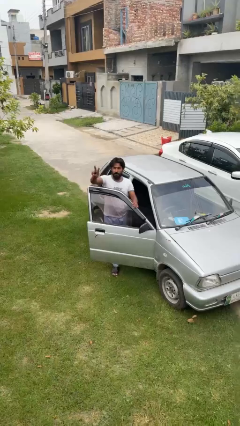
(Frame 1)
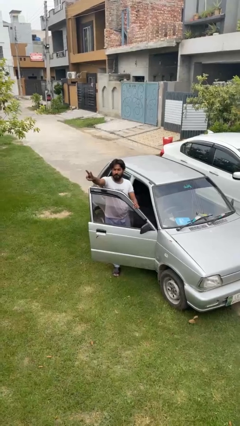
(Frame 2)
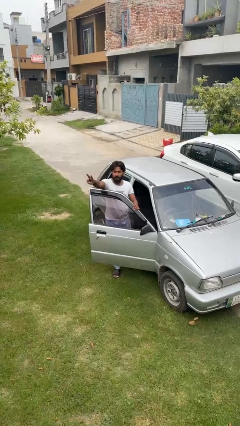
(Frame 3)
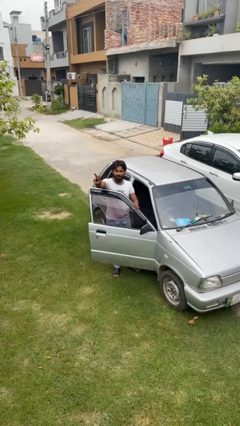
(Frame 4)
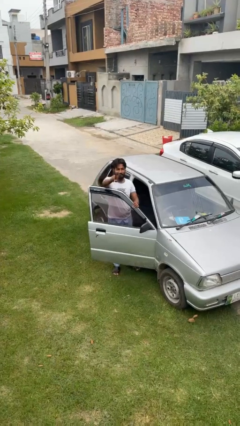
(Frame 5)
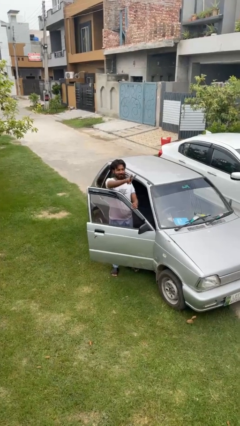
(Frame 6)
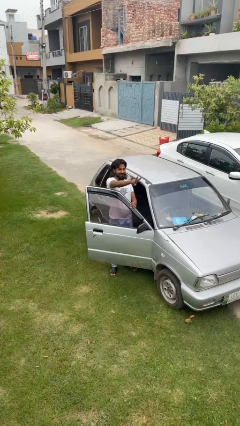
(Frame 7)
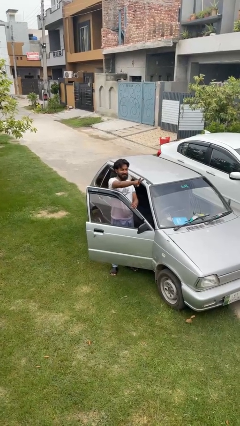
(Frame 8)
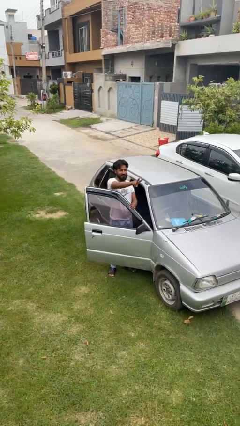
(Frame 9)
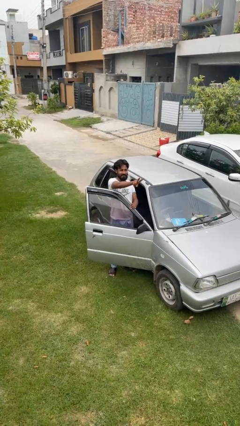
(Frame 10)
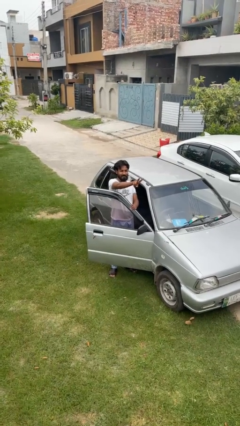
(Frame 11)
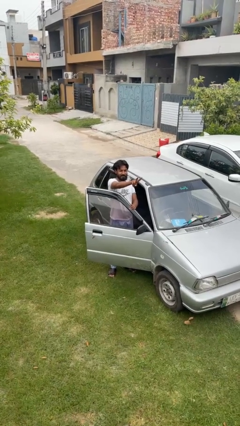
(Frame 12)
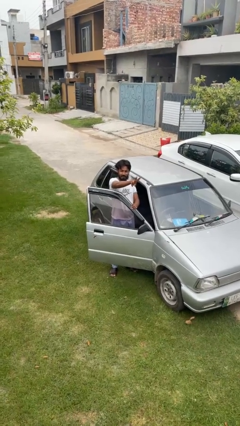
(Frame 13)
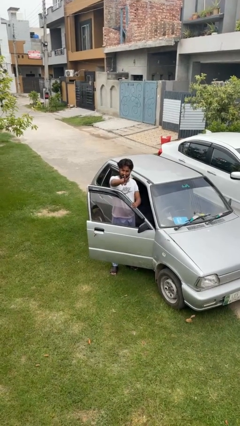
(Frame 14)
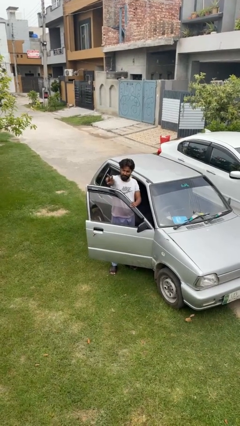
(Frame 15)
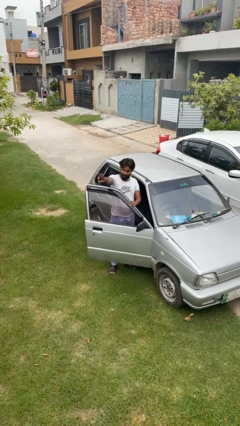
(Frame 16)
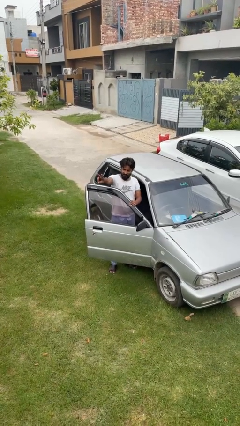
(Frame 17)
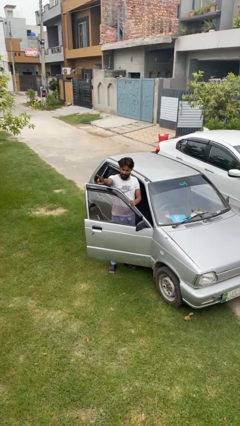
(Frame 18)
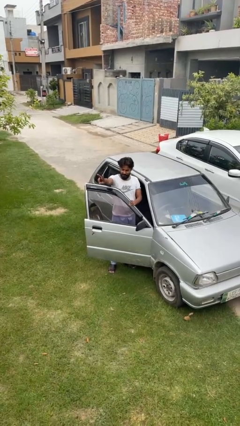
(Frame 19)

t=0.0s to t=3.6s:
person gestures peace

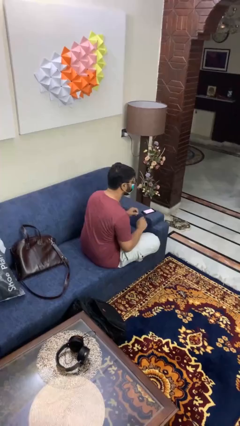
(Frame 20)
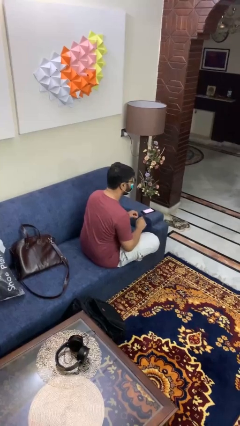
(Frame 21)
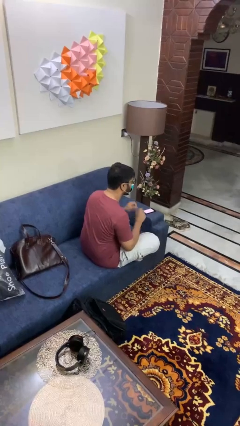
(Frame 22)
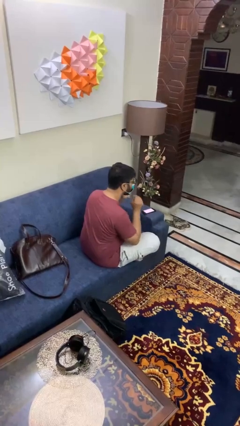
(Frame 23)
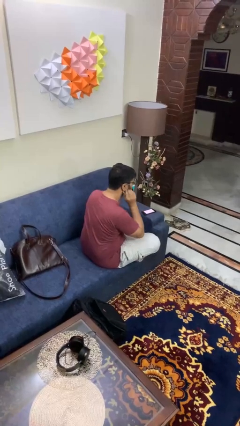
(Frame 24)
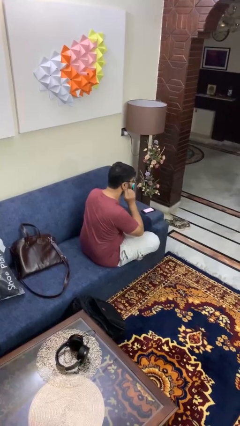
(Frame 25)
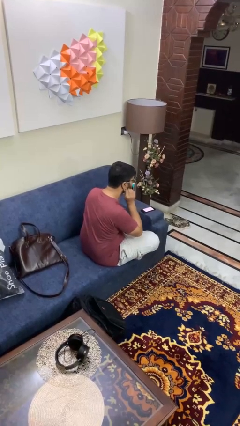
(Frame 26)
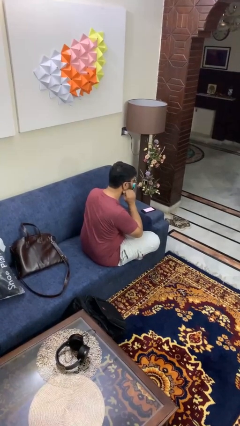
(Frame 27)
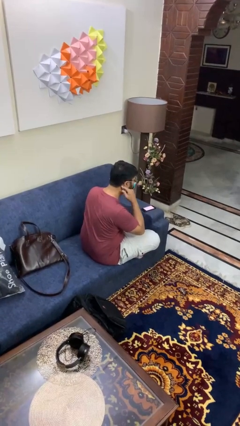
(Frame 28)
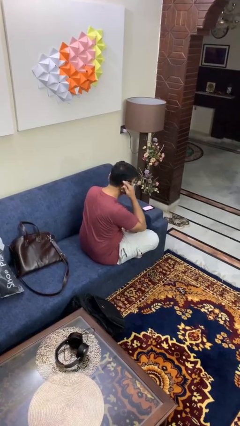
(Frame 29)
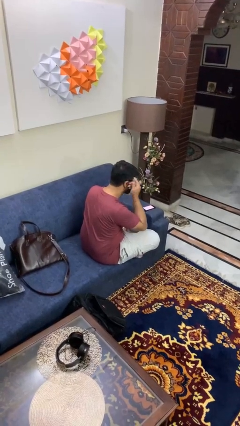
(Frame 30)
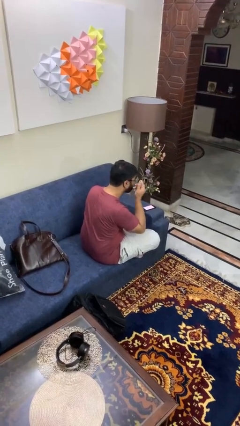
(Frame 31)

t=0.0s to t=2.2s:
person takes off facemask

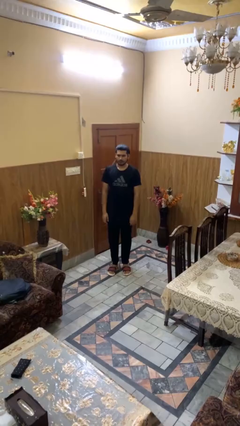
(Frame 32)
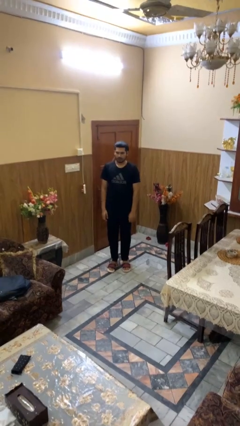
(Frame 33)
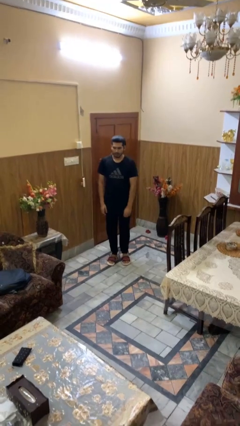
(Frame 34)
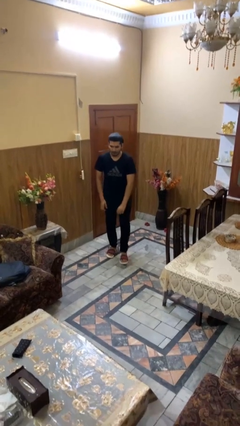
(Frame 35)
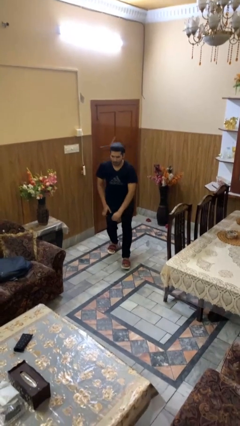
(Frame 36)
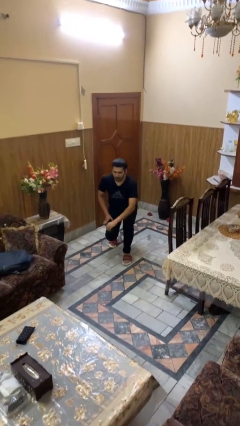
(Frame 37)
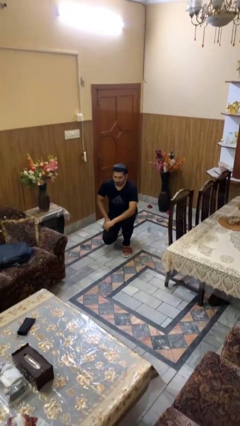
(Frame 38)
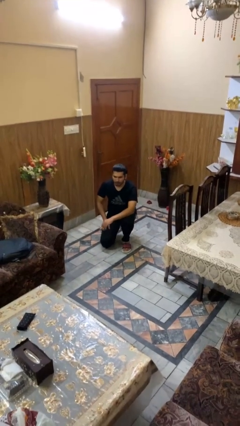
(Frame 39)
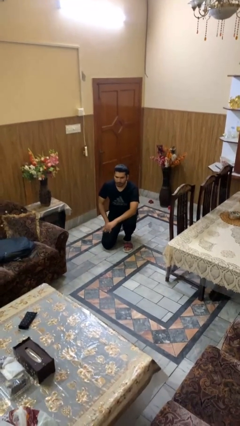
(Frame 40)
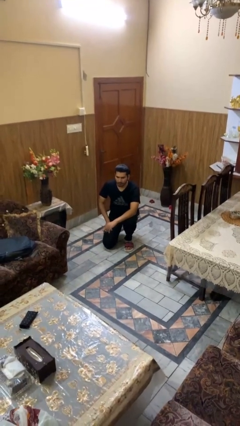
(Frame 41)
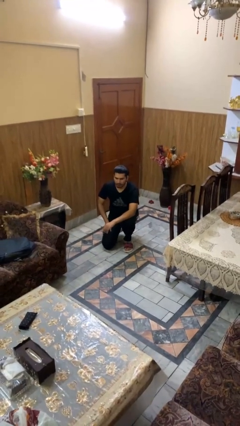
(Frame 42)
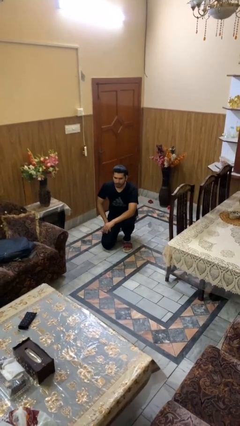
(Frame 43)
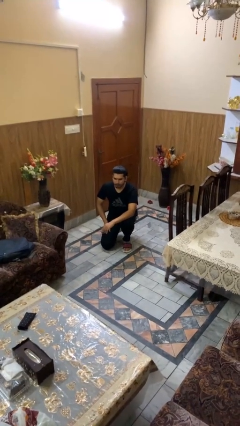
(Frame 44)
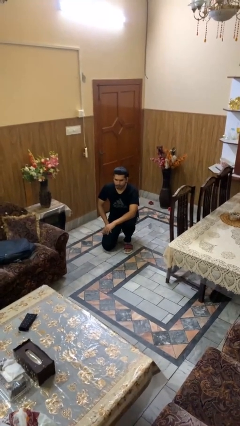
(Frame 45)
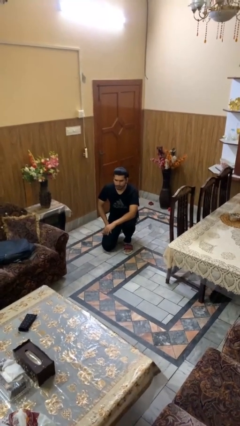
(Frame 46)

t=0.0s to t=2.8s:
person kneels

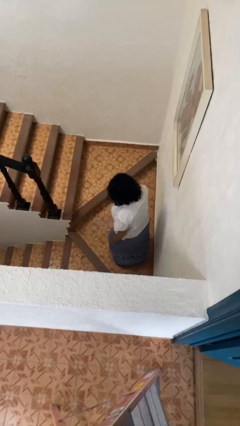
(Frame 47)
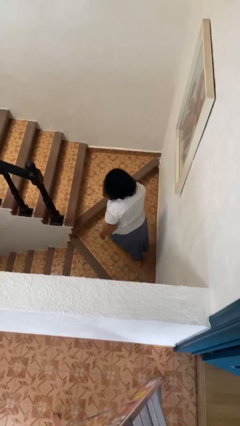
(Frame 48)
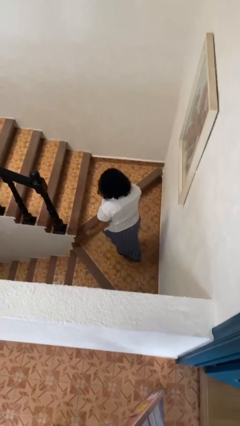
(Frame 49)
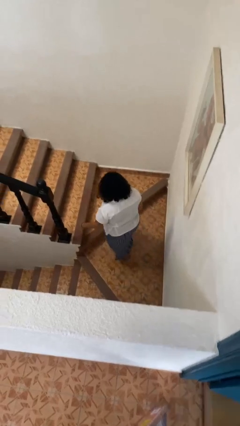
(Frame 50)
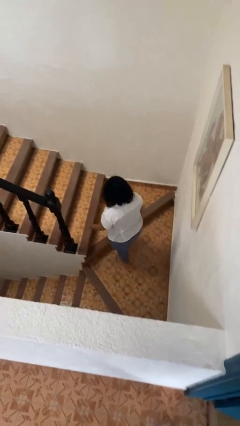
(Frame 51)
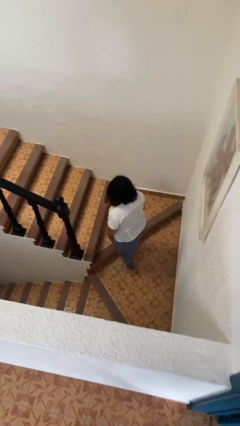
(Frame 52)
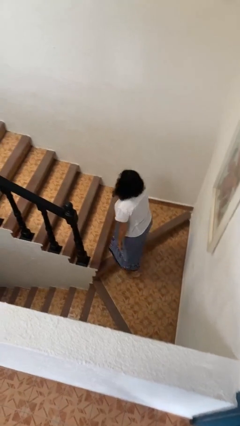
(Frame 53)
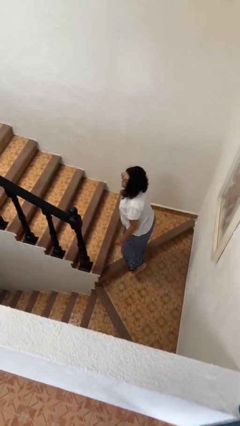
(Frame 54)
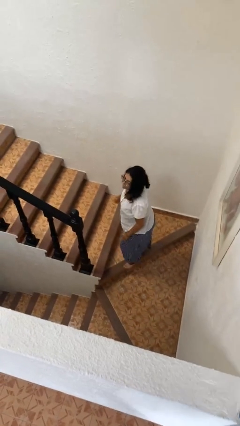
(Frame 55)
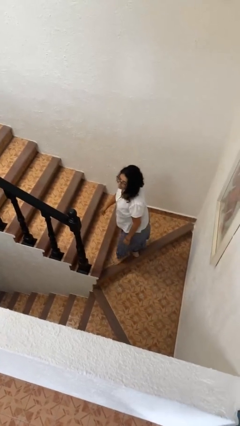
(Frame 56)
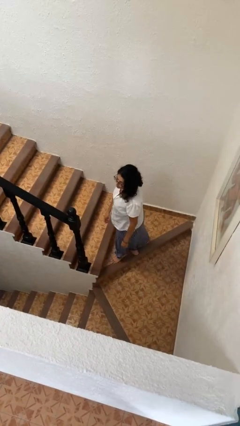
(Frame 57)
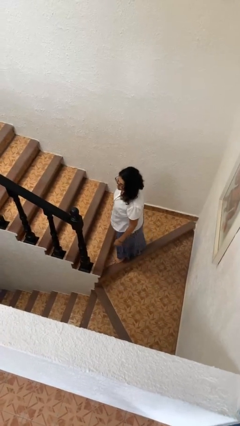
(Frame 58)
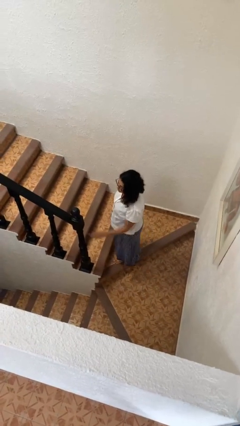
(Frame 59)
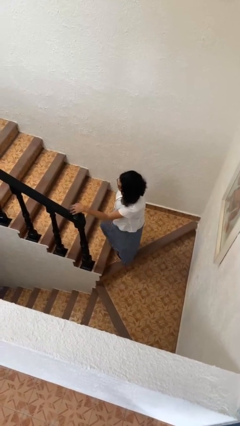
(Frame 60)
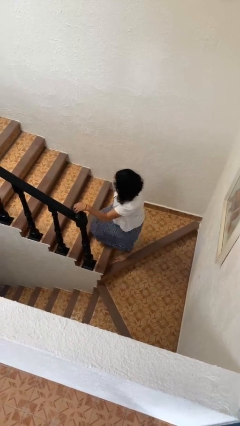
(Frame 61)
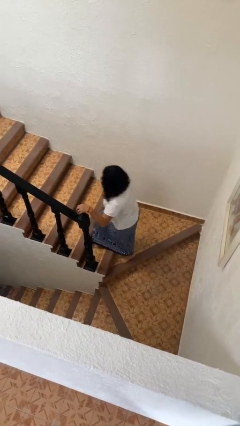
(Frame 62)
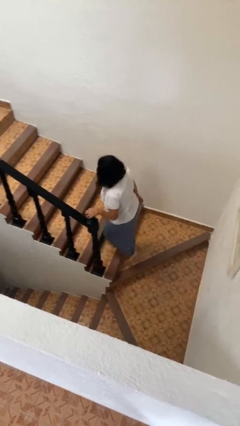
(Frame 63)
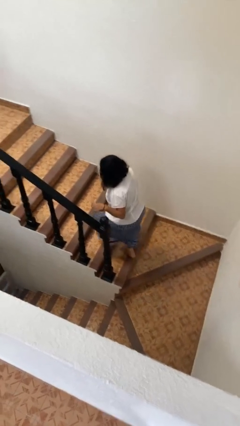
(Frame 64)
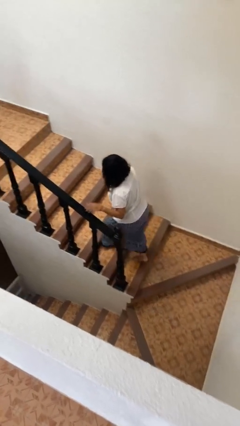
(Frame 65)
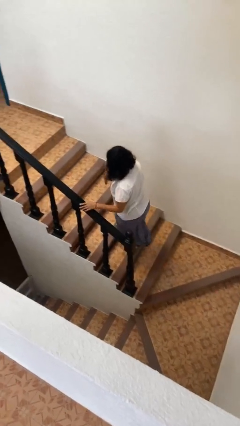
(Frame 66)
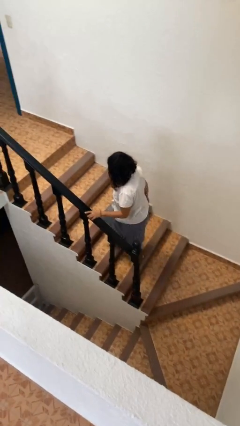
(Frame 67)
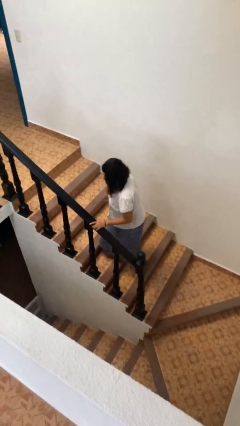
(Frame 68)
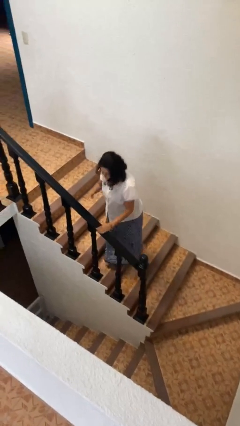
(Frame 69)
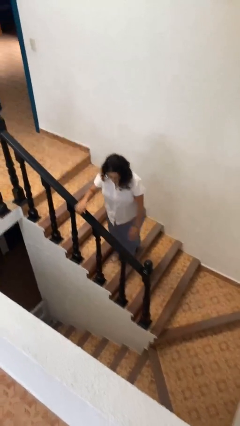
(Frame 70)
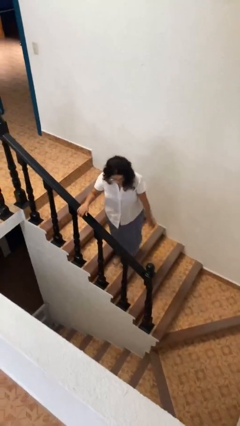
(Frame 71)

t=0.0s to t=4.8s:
person climbs up stairs

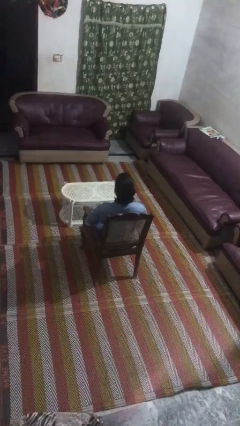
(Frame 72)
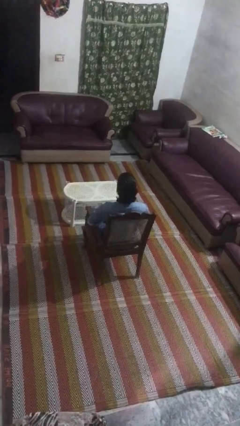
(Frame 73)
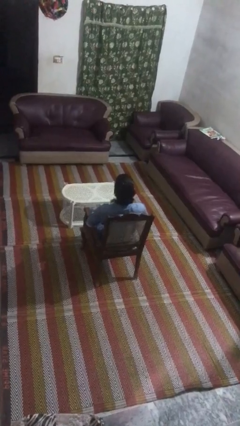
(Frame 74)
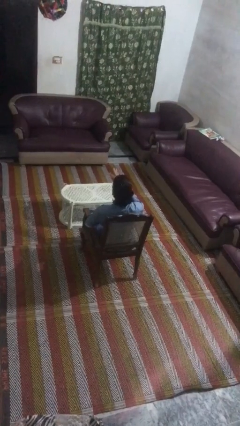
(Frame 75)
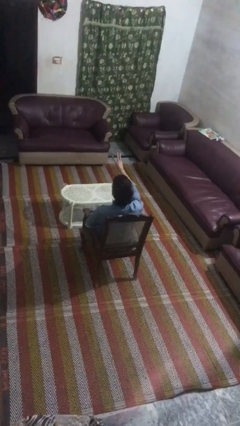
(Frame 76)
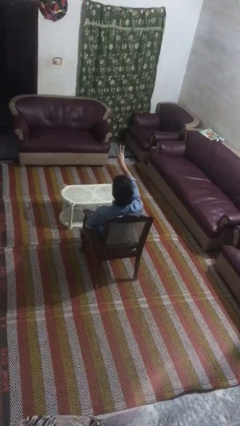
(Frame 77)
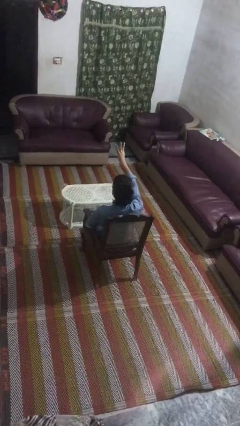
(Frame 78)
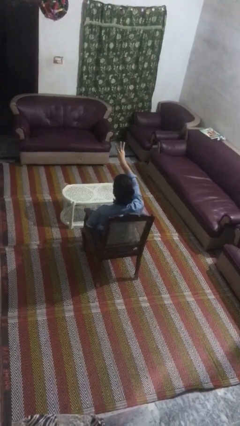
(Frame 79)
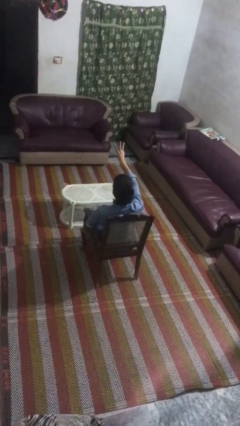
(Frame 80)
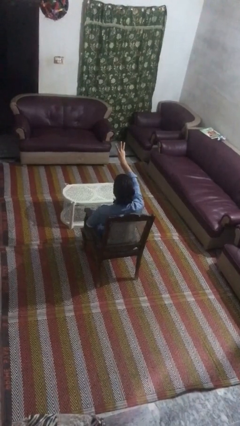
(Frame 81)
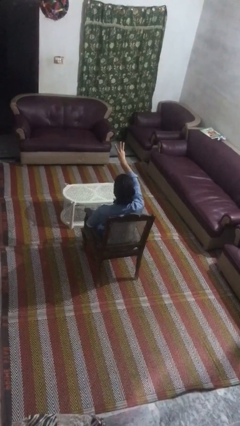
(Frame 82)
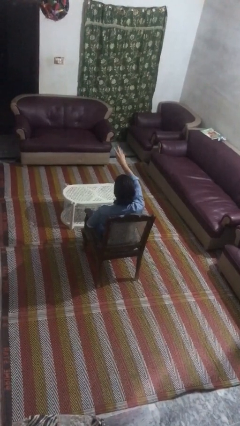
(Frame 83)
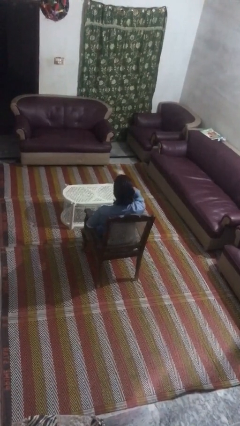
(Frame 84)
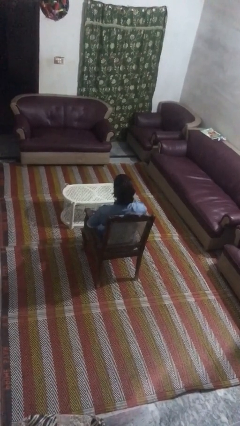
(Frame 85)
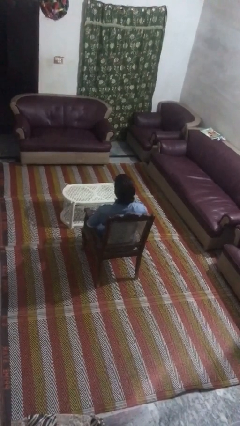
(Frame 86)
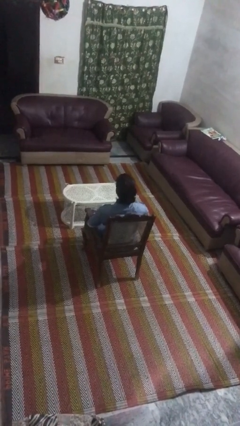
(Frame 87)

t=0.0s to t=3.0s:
person gestures number three

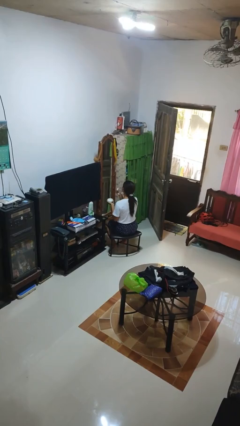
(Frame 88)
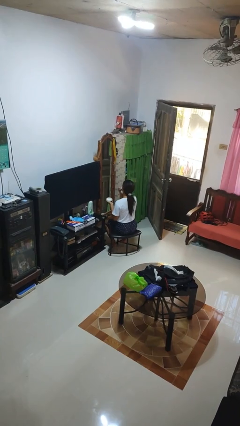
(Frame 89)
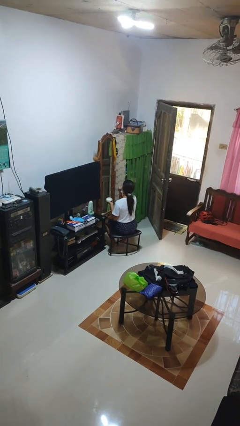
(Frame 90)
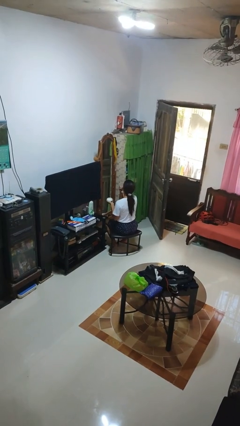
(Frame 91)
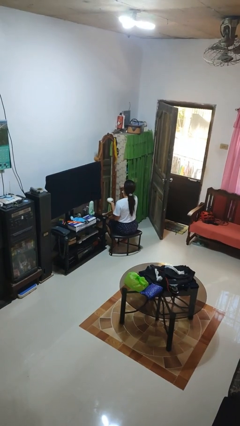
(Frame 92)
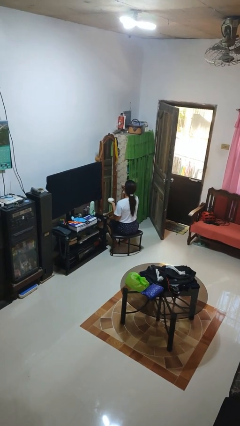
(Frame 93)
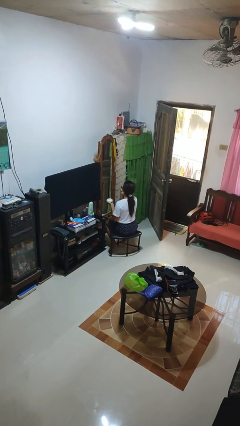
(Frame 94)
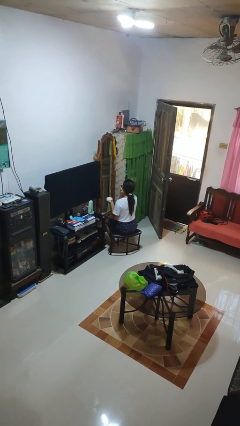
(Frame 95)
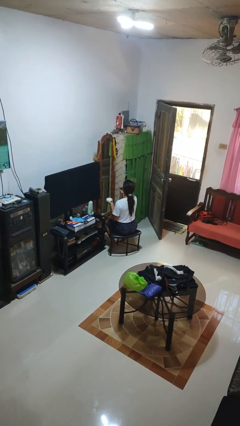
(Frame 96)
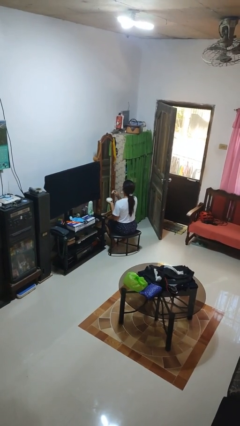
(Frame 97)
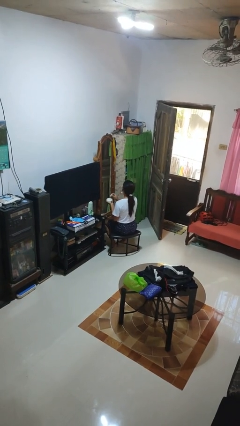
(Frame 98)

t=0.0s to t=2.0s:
person applies foundation makeup
